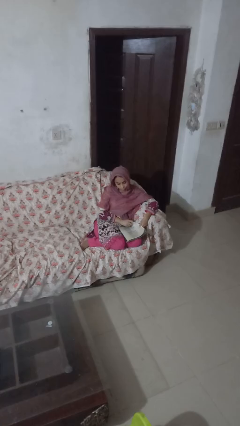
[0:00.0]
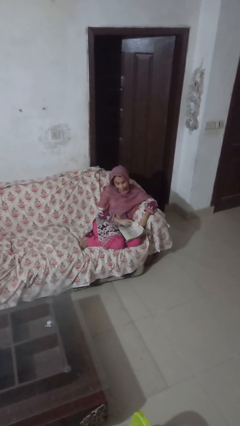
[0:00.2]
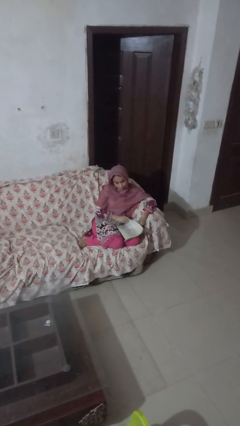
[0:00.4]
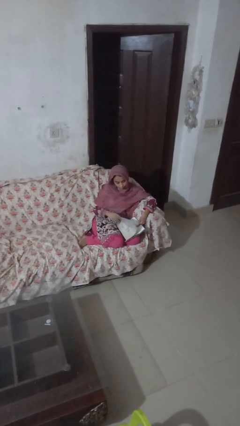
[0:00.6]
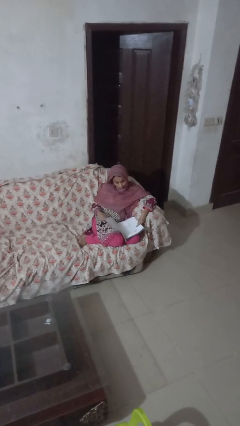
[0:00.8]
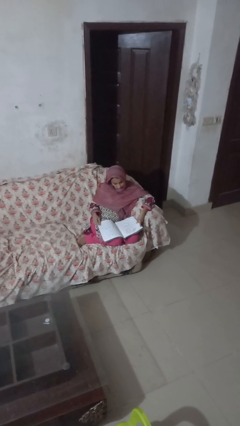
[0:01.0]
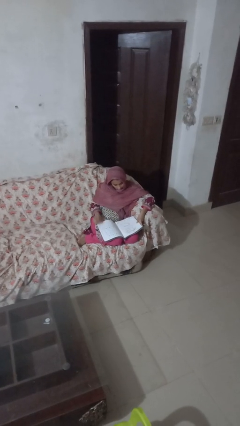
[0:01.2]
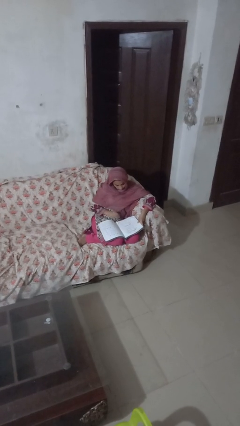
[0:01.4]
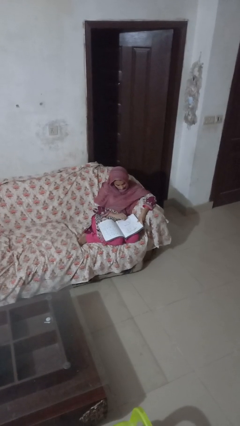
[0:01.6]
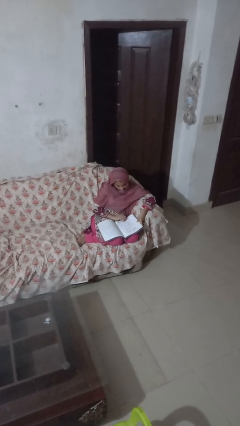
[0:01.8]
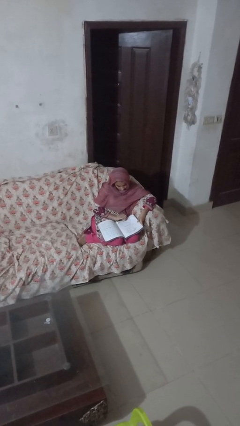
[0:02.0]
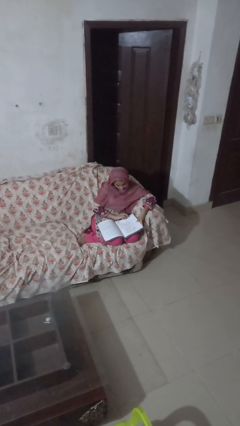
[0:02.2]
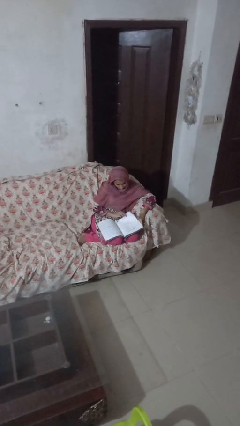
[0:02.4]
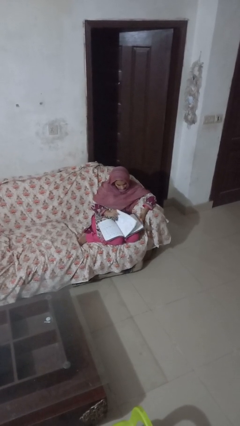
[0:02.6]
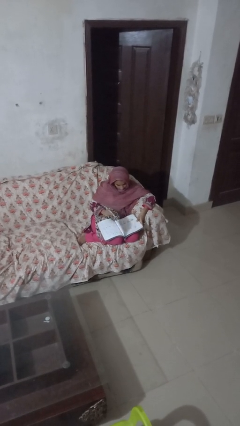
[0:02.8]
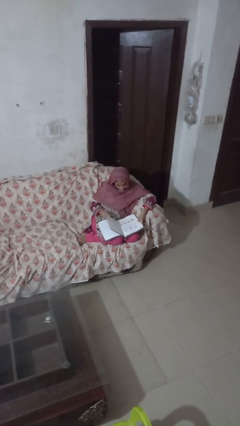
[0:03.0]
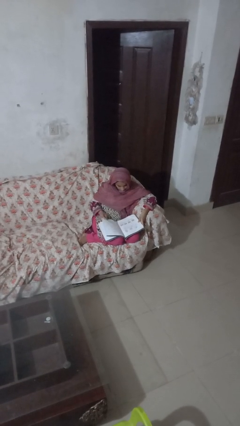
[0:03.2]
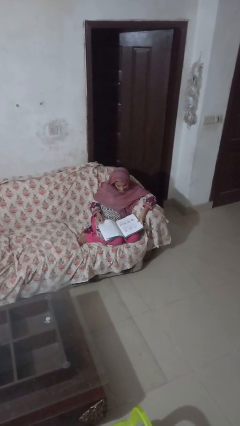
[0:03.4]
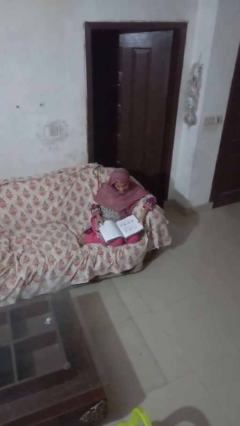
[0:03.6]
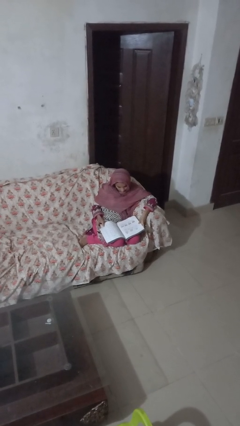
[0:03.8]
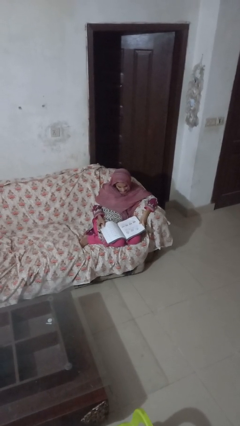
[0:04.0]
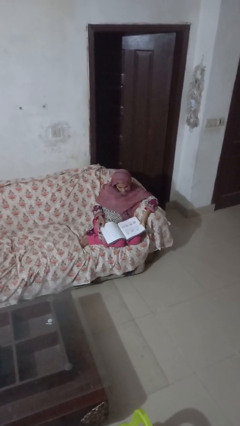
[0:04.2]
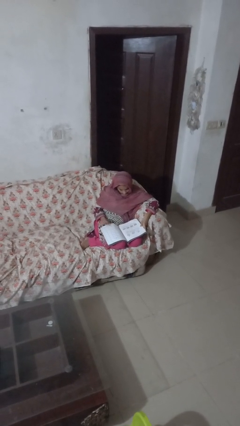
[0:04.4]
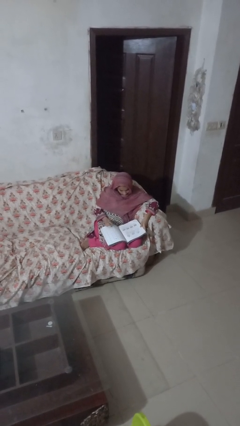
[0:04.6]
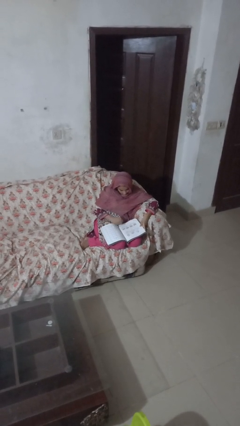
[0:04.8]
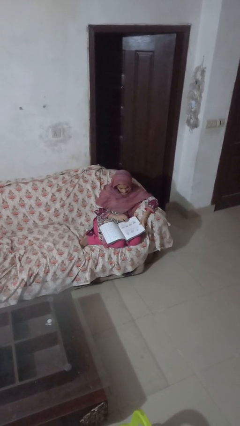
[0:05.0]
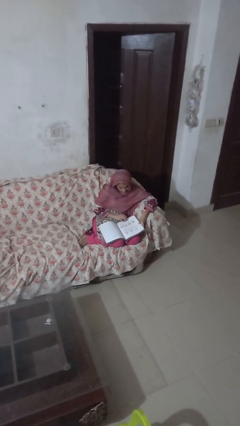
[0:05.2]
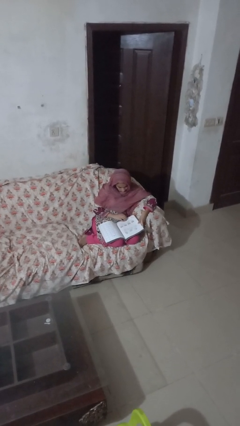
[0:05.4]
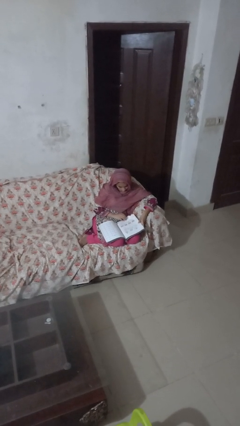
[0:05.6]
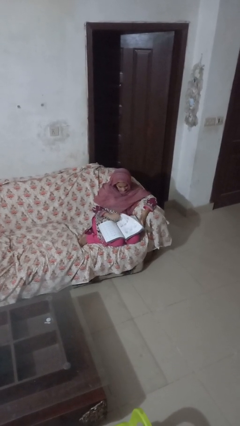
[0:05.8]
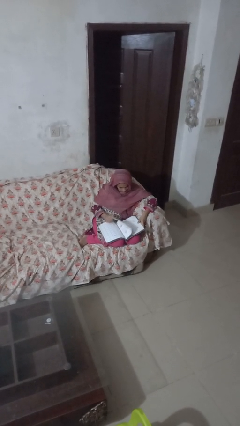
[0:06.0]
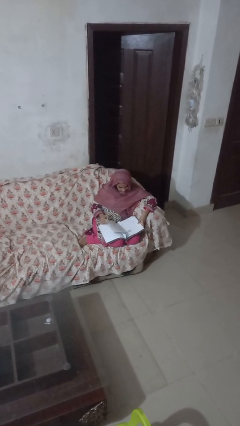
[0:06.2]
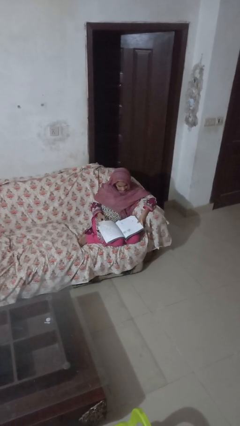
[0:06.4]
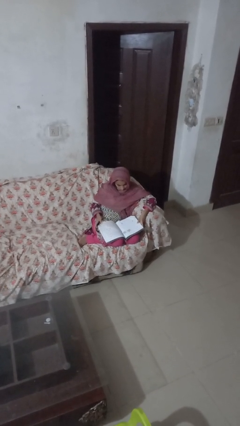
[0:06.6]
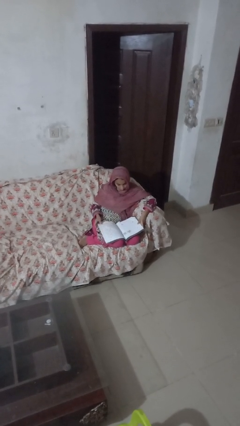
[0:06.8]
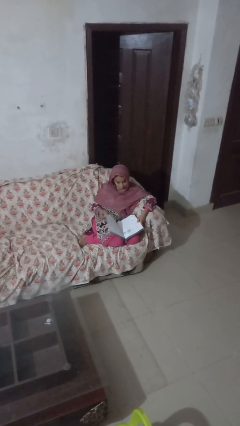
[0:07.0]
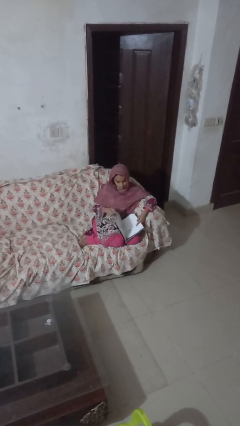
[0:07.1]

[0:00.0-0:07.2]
person reads book

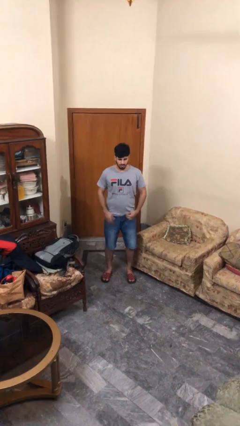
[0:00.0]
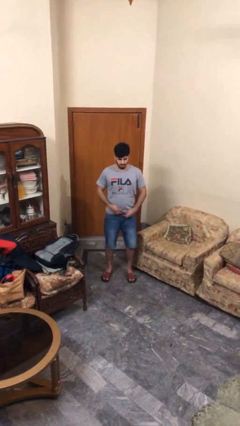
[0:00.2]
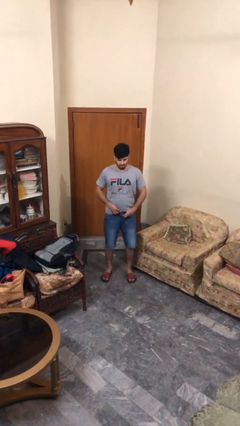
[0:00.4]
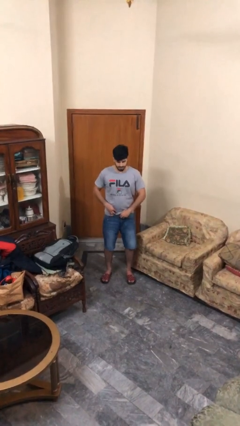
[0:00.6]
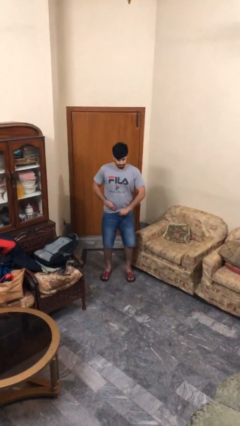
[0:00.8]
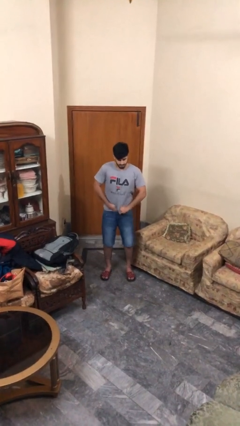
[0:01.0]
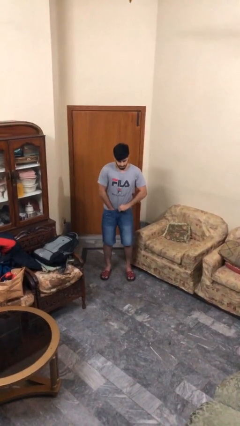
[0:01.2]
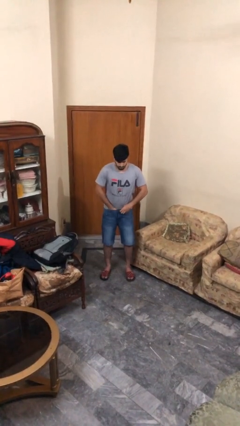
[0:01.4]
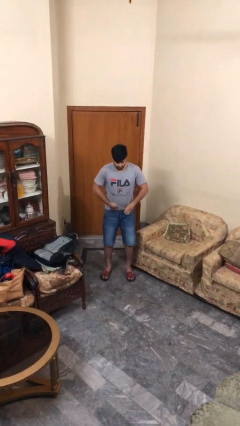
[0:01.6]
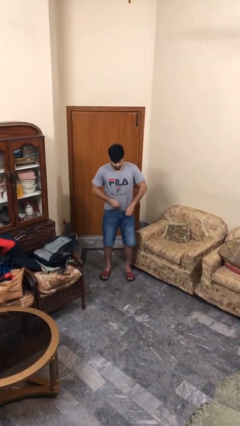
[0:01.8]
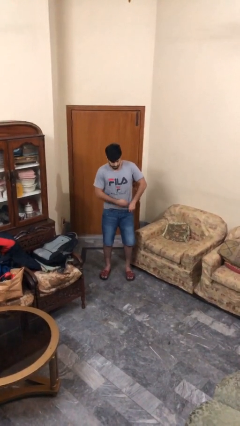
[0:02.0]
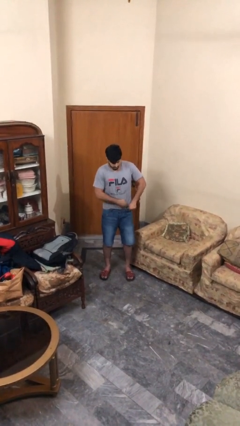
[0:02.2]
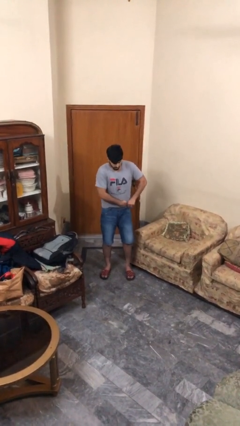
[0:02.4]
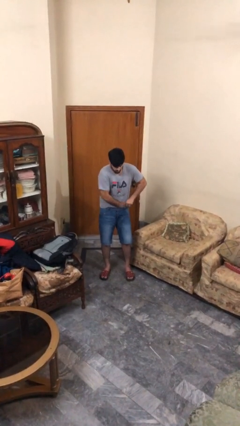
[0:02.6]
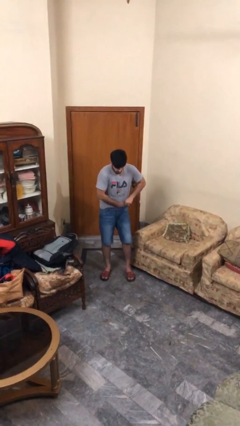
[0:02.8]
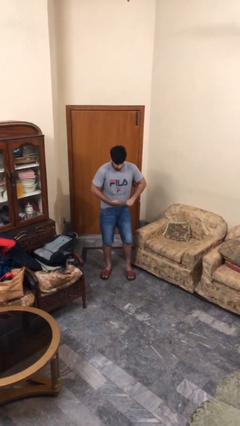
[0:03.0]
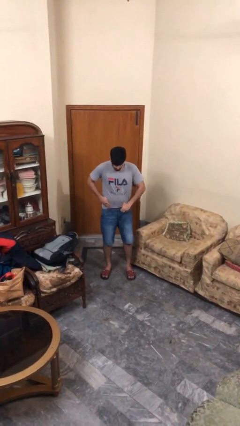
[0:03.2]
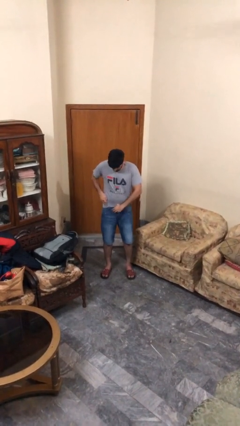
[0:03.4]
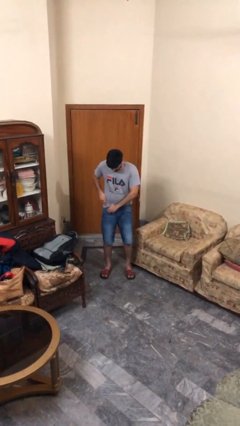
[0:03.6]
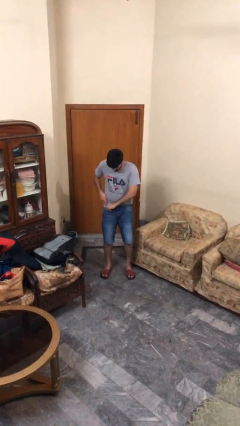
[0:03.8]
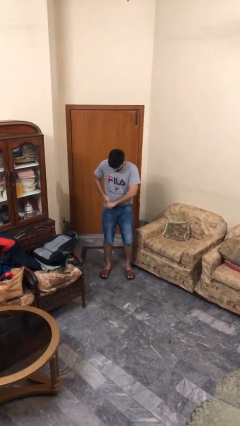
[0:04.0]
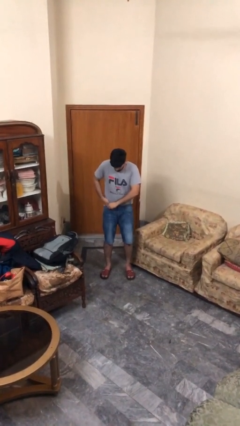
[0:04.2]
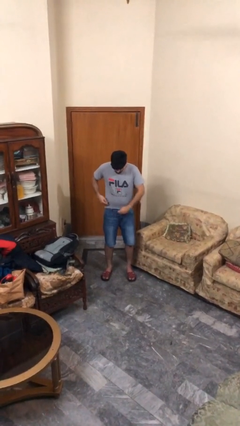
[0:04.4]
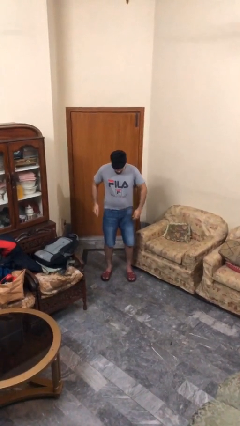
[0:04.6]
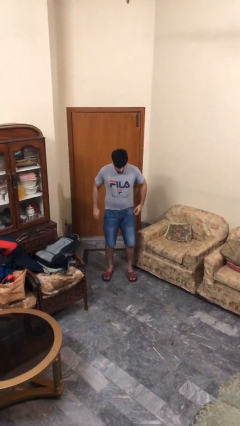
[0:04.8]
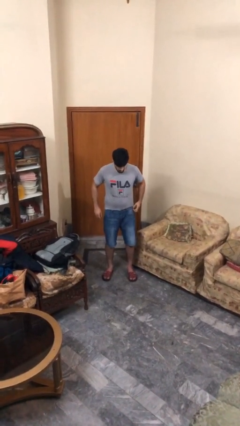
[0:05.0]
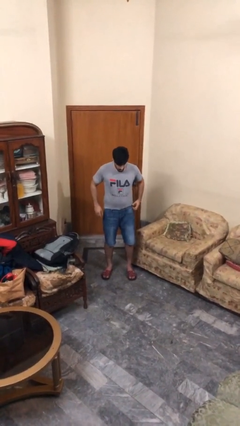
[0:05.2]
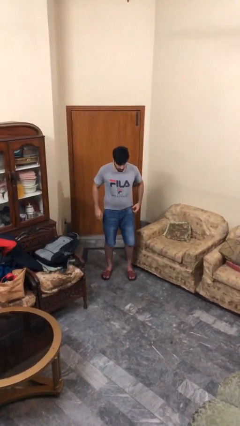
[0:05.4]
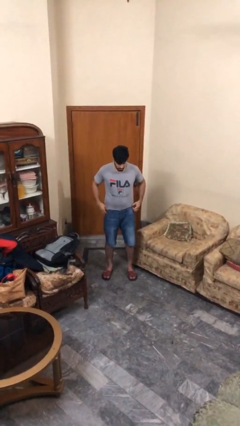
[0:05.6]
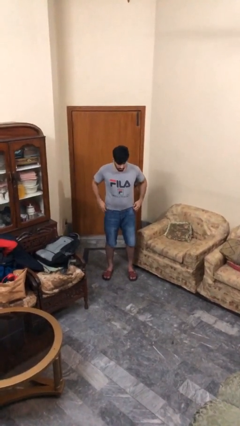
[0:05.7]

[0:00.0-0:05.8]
person tucks in shirt

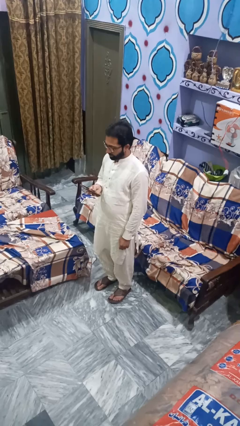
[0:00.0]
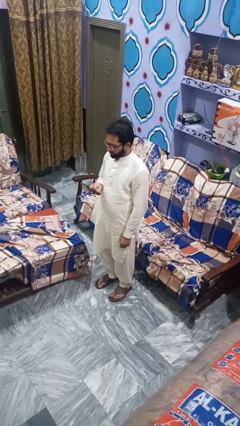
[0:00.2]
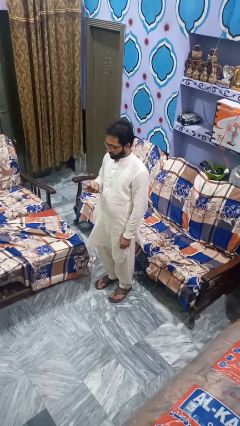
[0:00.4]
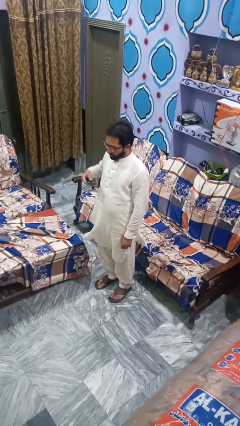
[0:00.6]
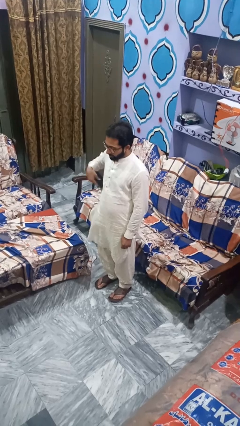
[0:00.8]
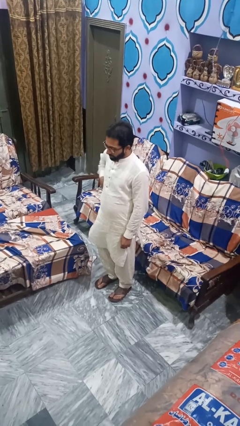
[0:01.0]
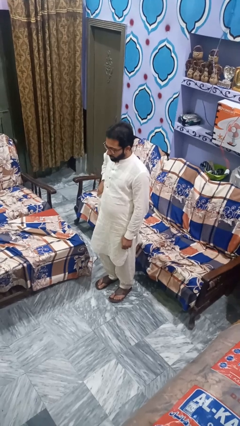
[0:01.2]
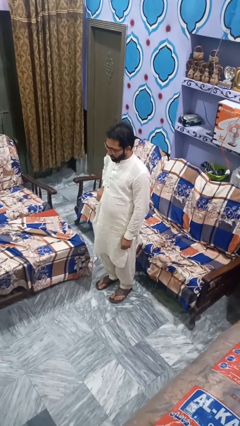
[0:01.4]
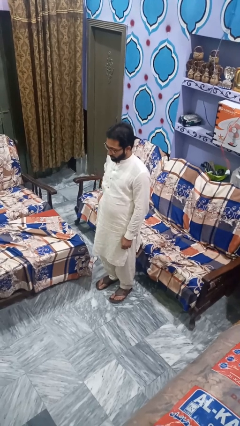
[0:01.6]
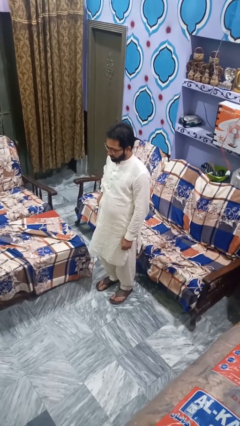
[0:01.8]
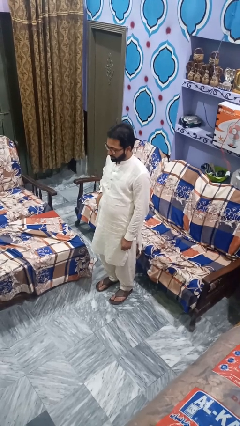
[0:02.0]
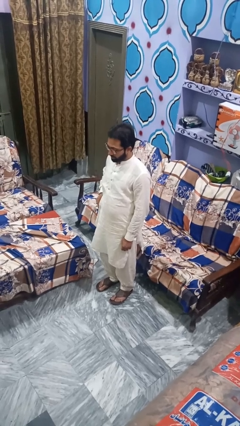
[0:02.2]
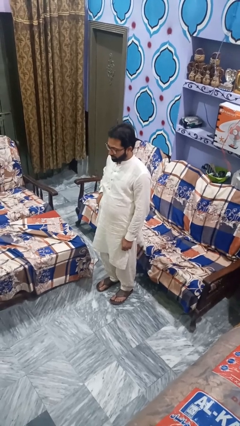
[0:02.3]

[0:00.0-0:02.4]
person puts phone into pocket

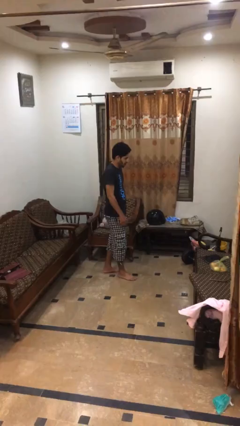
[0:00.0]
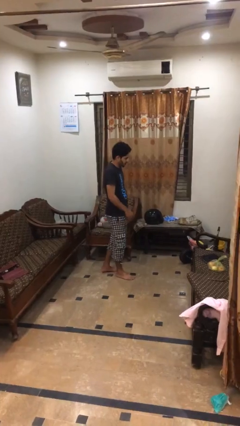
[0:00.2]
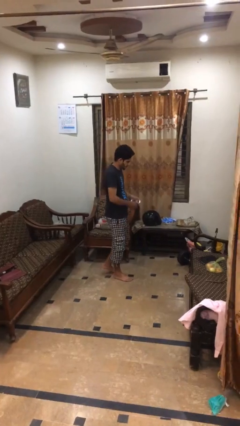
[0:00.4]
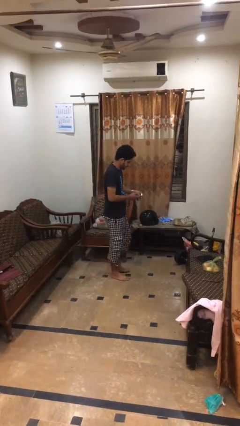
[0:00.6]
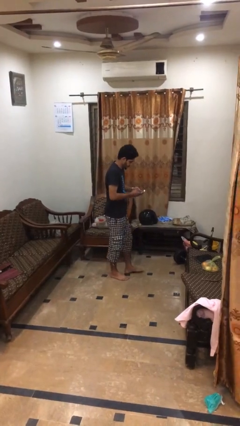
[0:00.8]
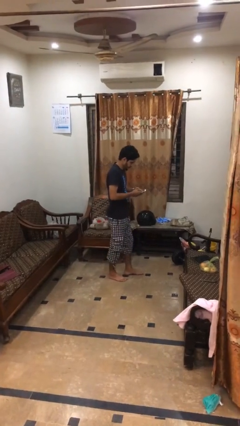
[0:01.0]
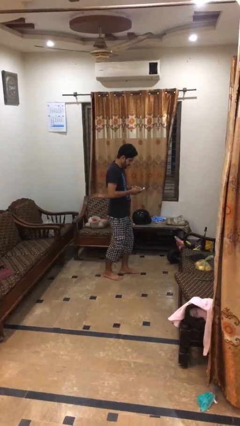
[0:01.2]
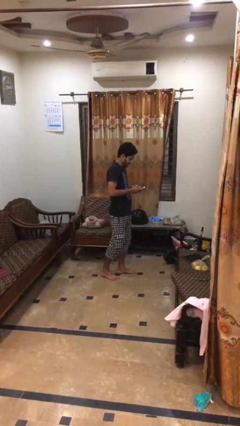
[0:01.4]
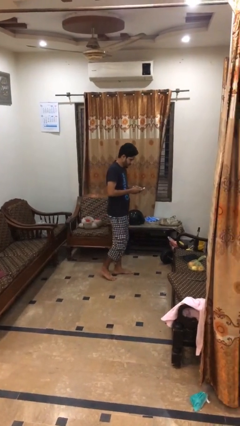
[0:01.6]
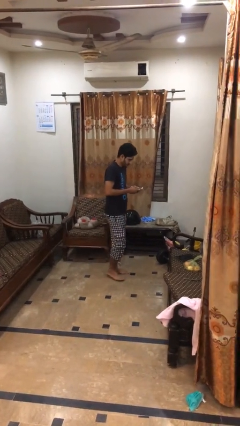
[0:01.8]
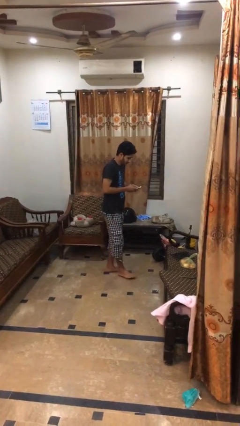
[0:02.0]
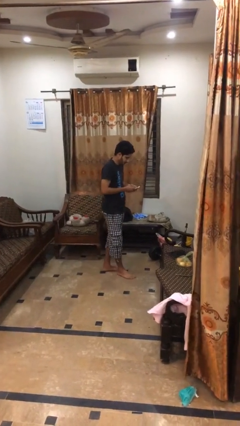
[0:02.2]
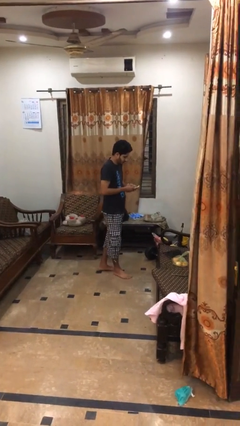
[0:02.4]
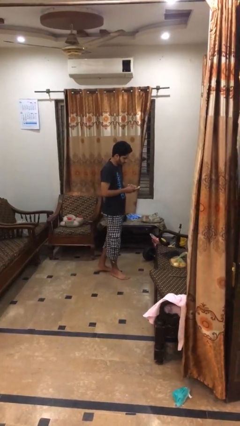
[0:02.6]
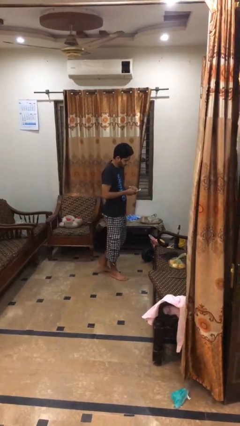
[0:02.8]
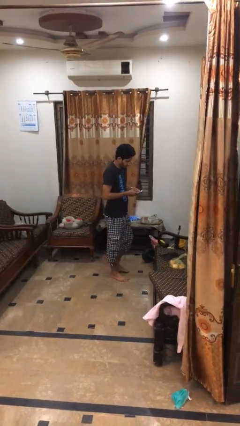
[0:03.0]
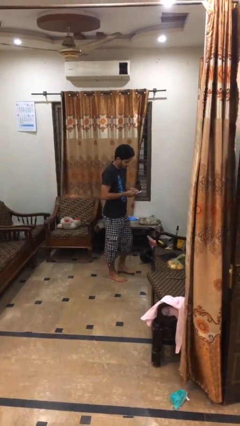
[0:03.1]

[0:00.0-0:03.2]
person texts on phone
